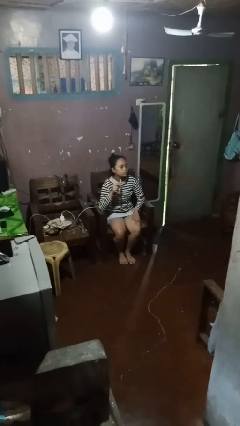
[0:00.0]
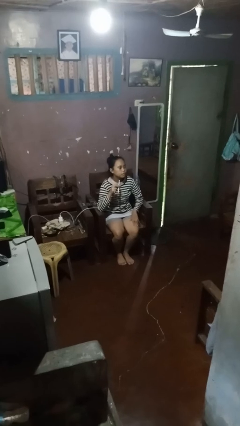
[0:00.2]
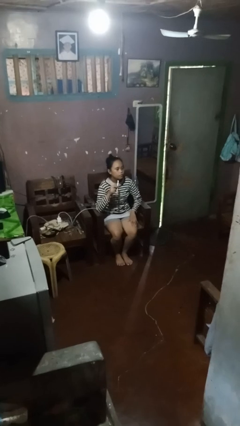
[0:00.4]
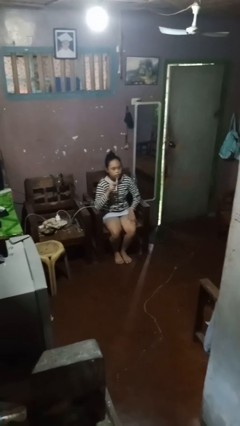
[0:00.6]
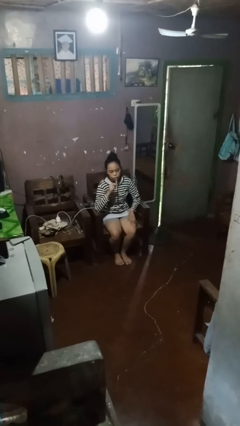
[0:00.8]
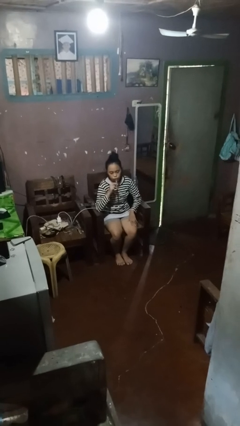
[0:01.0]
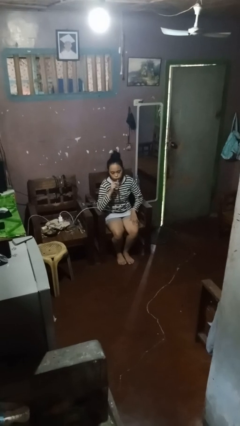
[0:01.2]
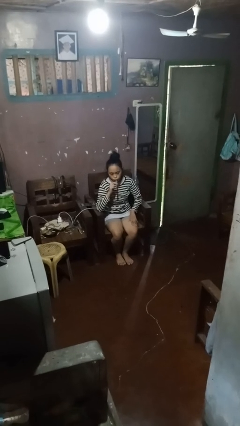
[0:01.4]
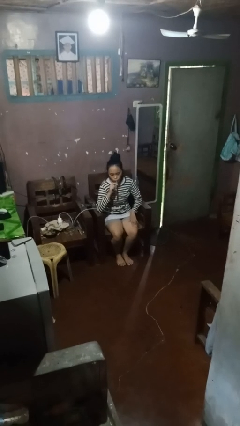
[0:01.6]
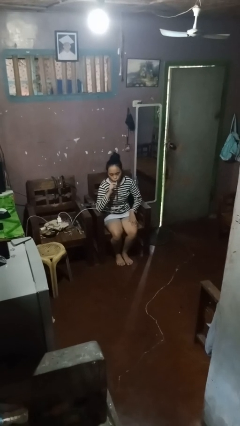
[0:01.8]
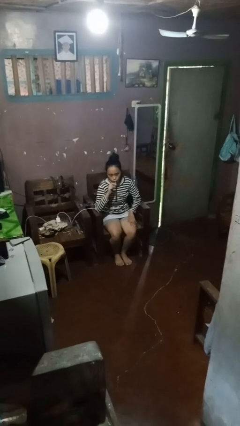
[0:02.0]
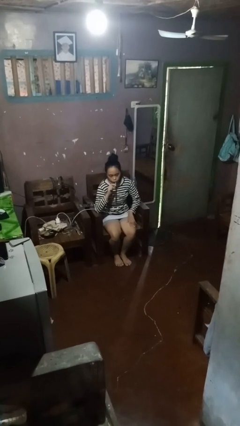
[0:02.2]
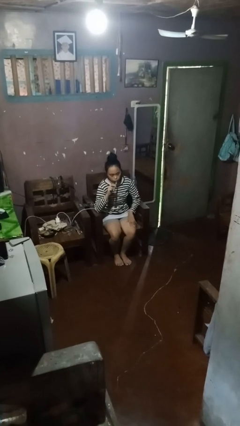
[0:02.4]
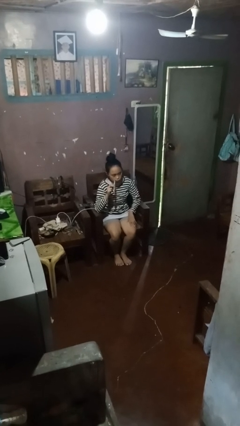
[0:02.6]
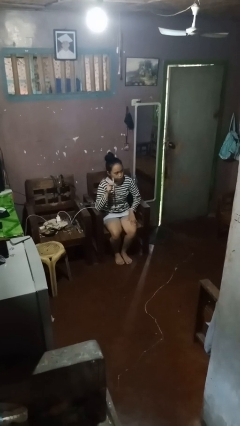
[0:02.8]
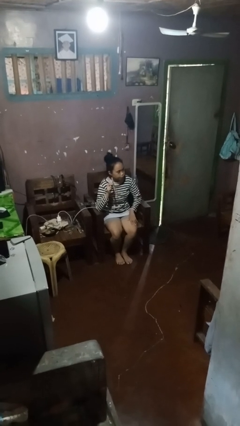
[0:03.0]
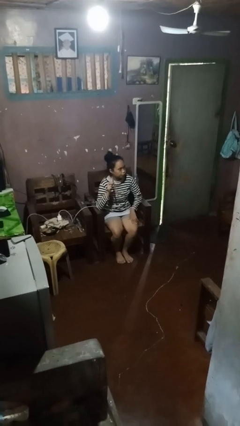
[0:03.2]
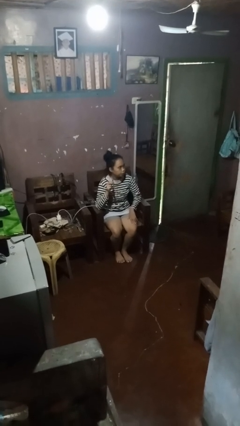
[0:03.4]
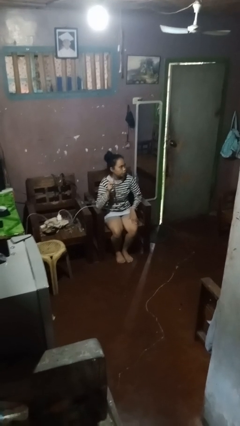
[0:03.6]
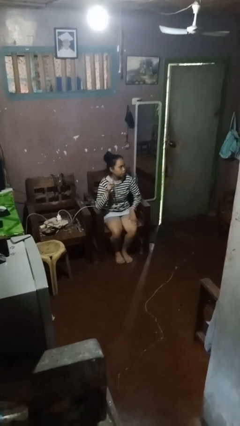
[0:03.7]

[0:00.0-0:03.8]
person vapes

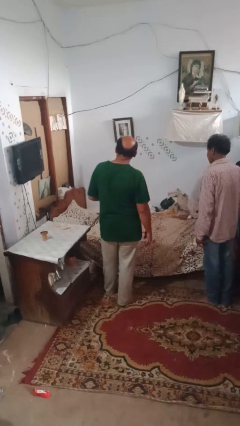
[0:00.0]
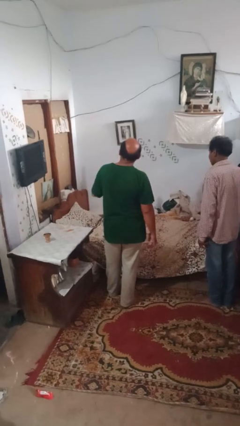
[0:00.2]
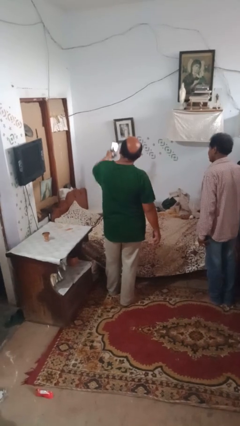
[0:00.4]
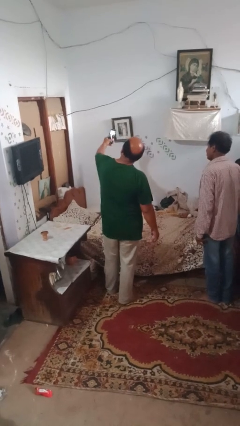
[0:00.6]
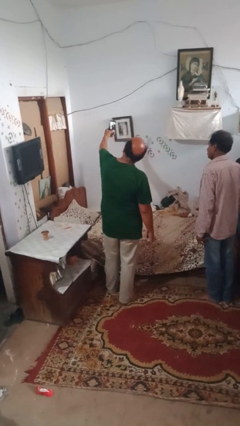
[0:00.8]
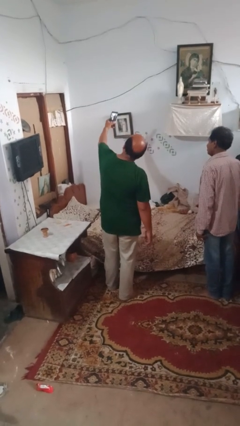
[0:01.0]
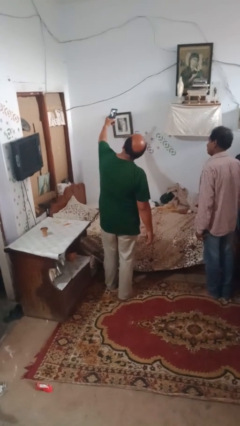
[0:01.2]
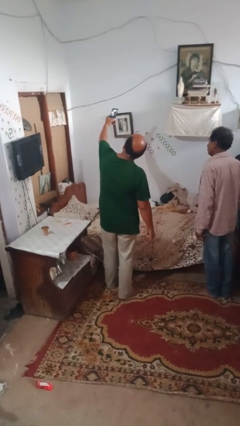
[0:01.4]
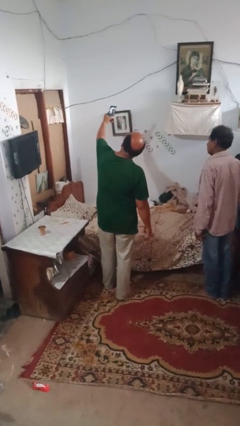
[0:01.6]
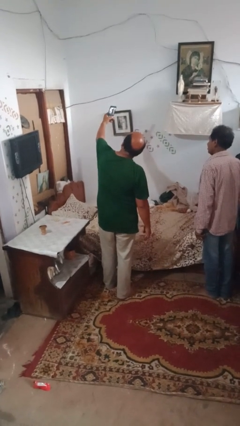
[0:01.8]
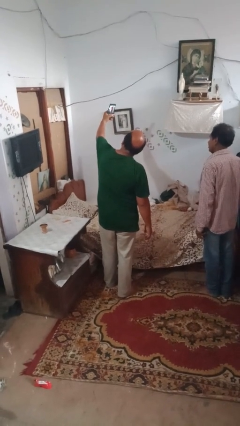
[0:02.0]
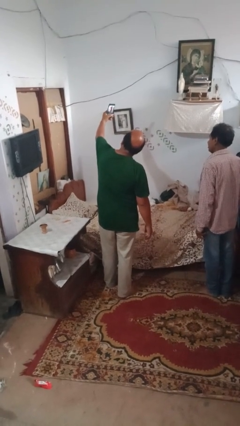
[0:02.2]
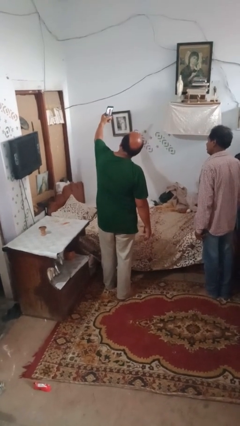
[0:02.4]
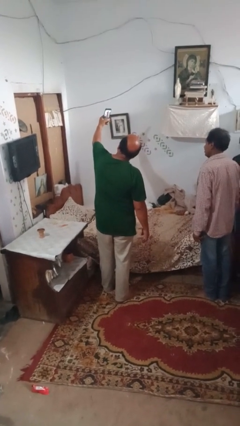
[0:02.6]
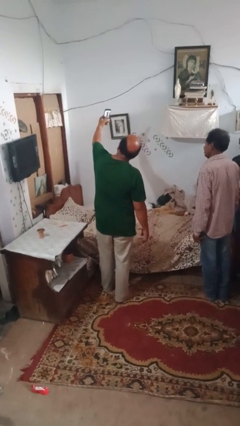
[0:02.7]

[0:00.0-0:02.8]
person takes selfie with person

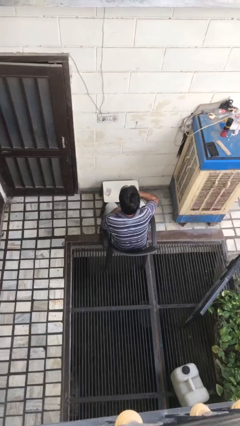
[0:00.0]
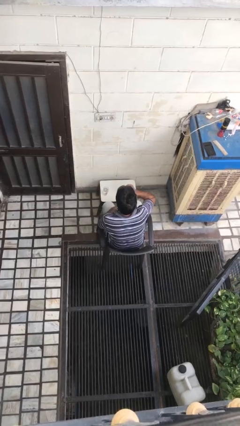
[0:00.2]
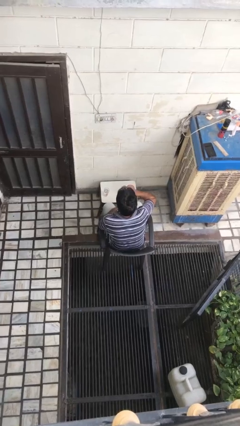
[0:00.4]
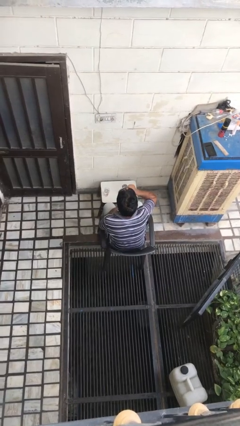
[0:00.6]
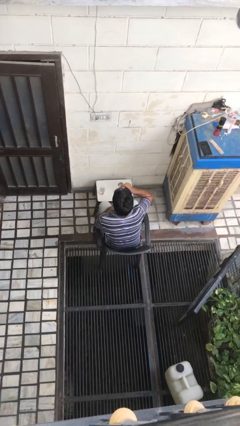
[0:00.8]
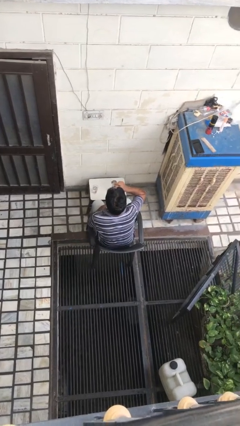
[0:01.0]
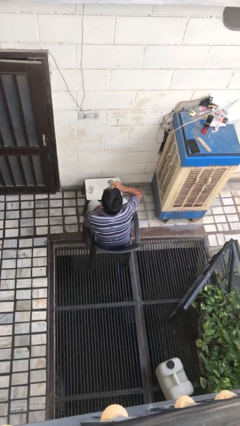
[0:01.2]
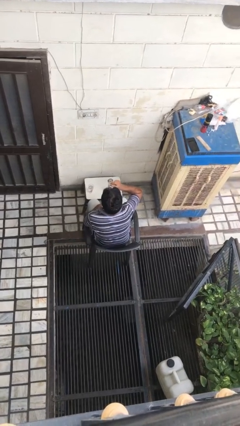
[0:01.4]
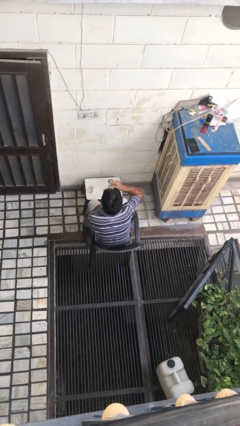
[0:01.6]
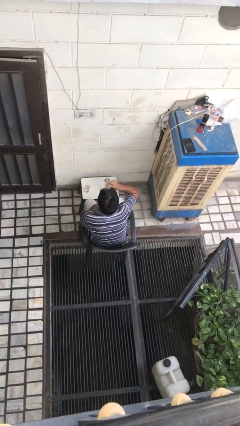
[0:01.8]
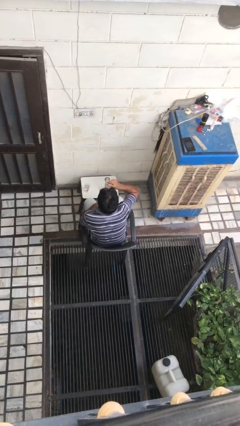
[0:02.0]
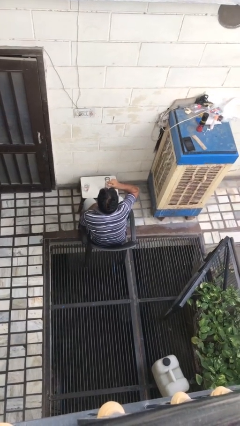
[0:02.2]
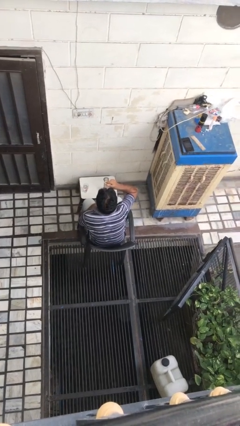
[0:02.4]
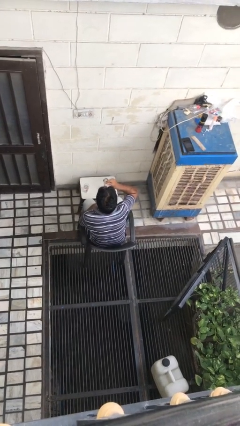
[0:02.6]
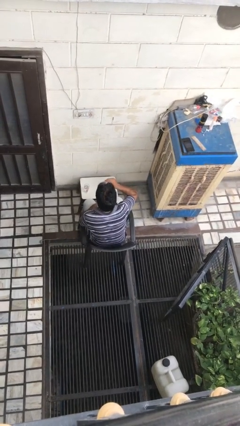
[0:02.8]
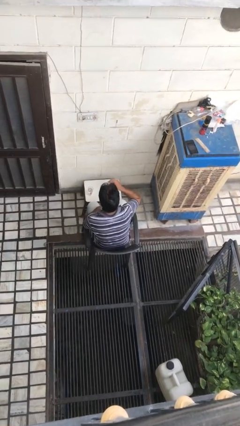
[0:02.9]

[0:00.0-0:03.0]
person drinks from shotglass

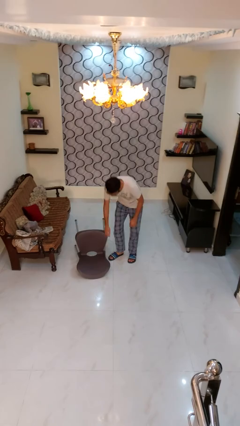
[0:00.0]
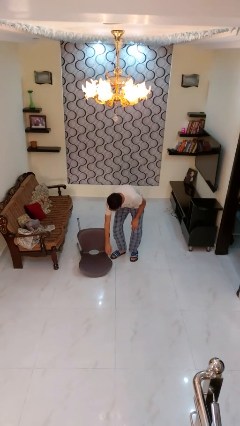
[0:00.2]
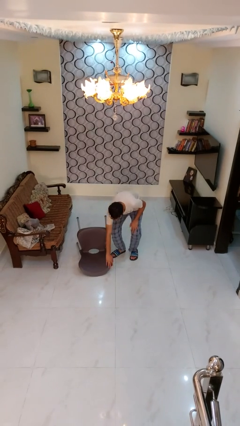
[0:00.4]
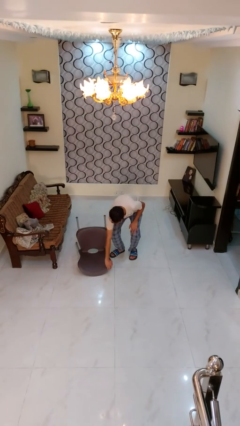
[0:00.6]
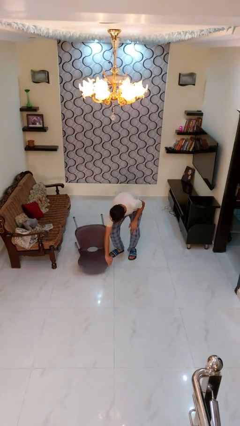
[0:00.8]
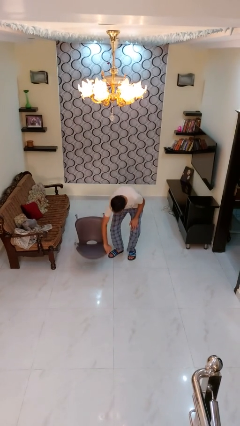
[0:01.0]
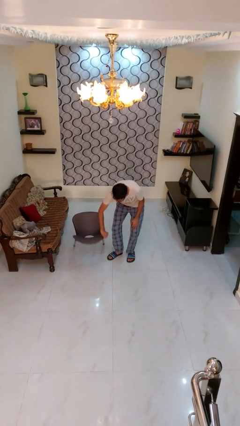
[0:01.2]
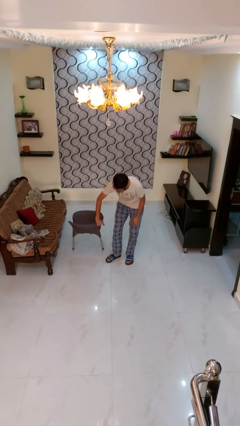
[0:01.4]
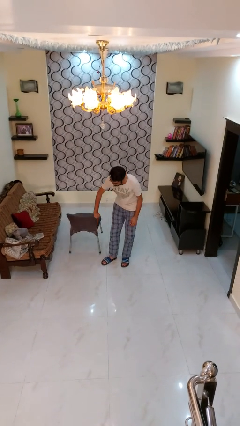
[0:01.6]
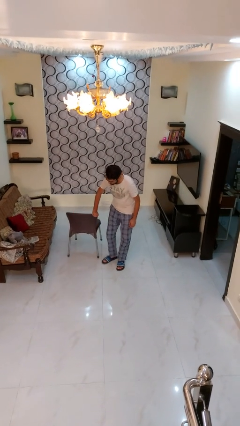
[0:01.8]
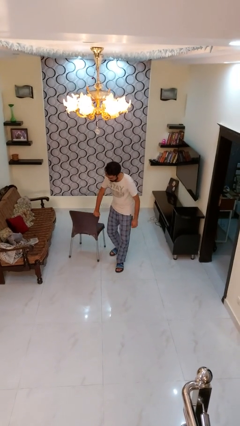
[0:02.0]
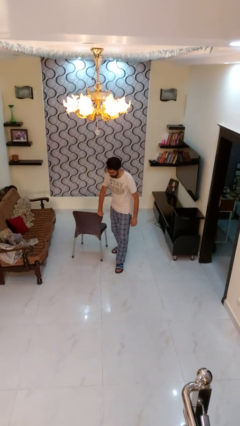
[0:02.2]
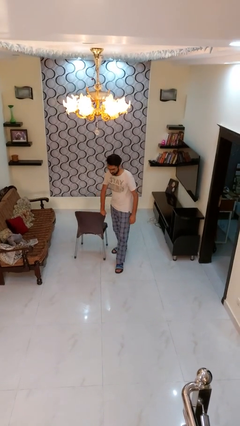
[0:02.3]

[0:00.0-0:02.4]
person sets upright furniture

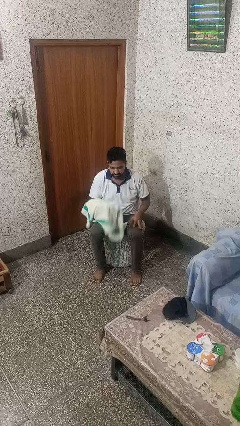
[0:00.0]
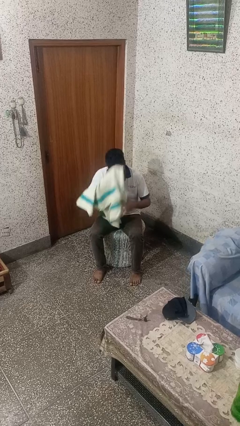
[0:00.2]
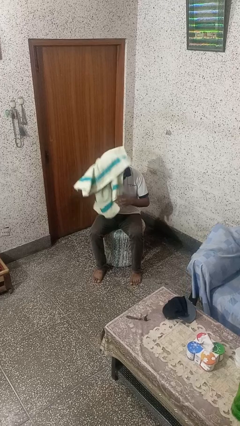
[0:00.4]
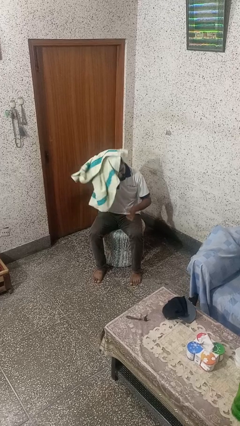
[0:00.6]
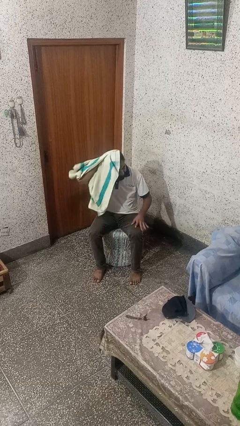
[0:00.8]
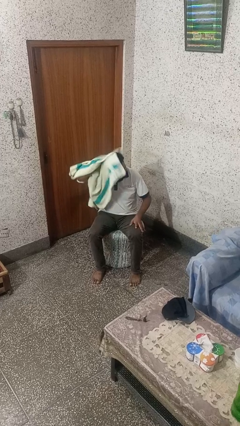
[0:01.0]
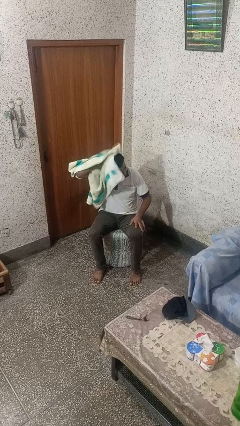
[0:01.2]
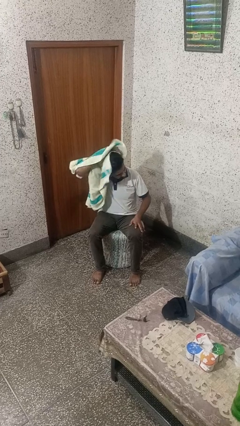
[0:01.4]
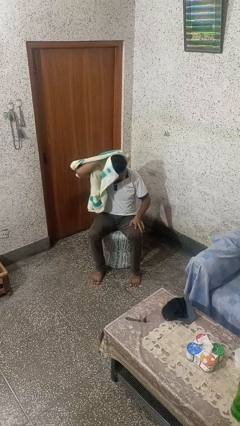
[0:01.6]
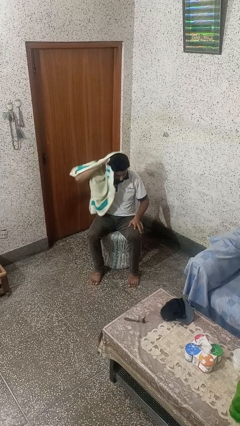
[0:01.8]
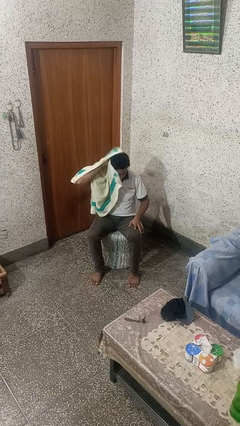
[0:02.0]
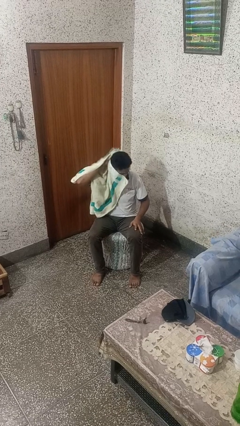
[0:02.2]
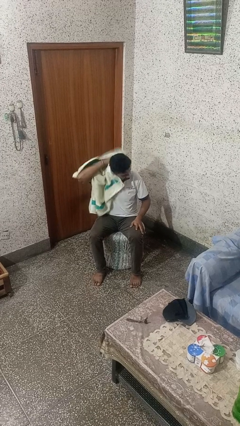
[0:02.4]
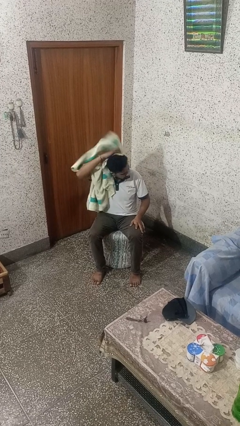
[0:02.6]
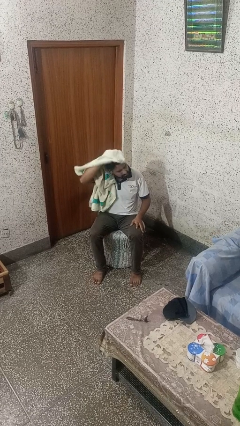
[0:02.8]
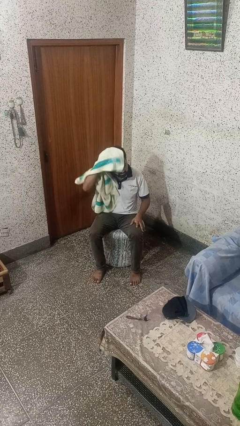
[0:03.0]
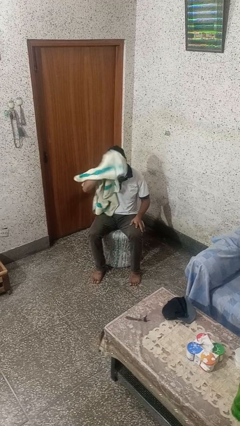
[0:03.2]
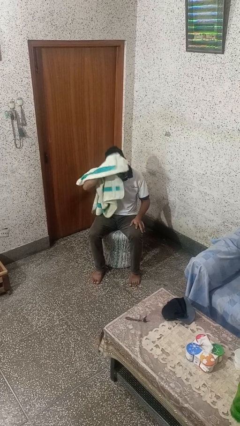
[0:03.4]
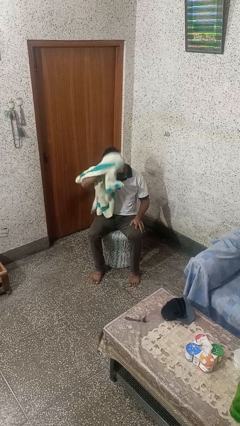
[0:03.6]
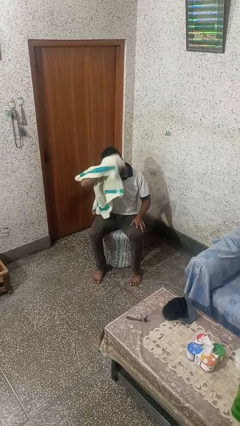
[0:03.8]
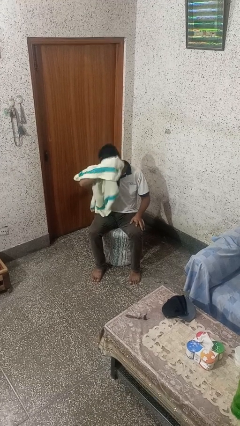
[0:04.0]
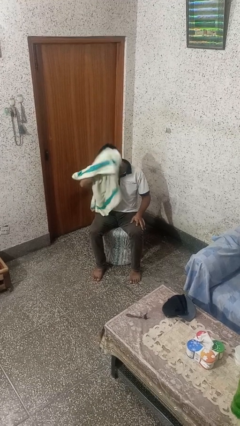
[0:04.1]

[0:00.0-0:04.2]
person dries hair with towel

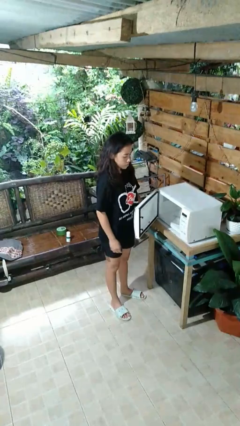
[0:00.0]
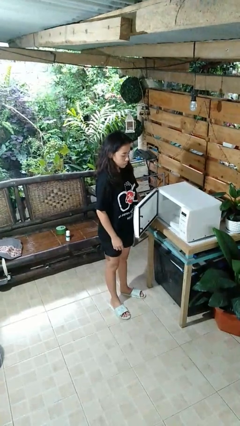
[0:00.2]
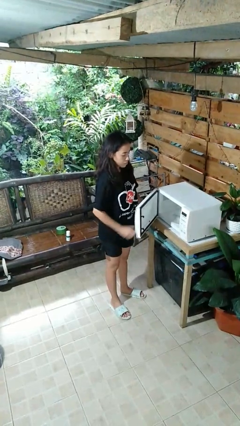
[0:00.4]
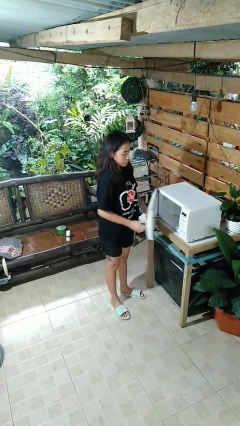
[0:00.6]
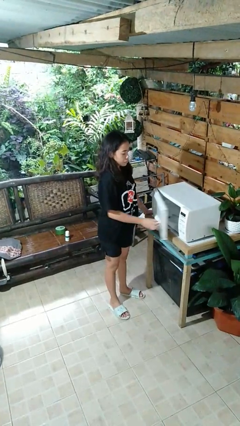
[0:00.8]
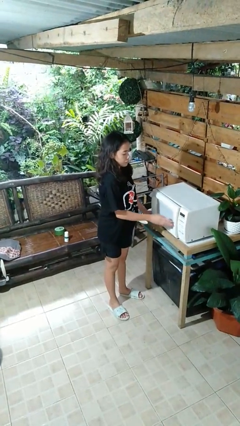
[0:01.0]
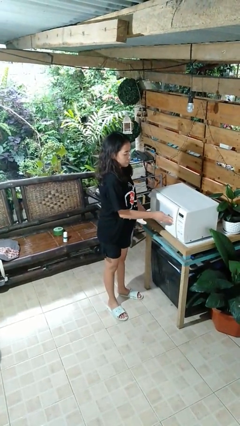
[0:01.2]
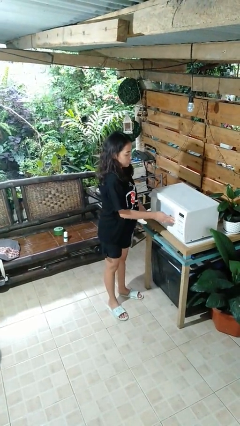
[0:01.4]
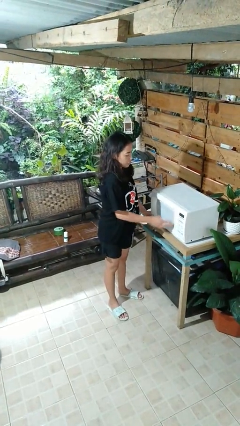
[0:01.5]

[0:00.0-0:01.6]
person closes microwave
